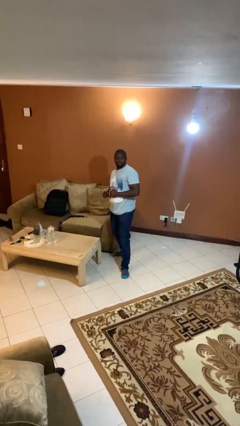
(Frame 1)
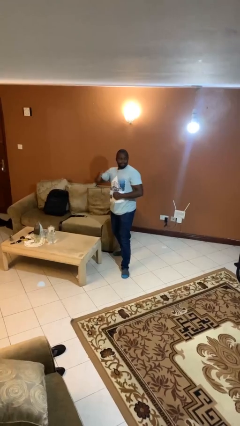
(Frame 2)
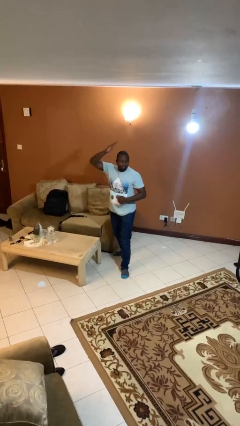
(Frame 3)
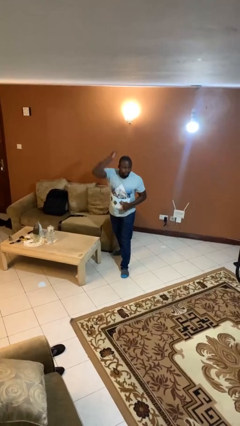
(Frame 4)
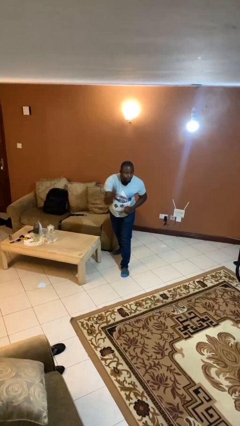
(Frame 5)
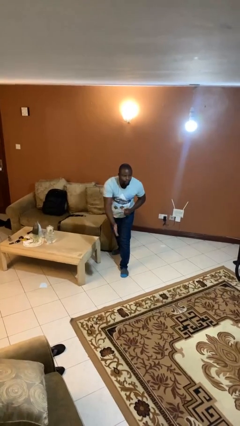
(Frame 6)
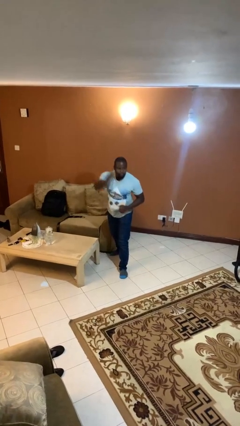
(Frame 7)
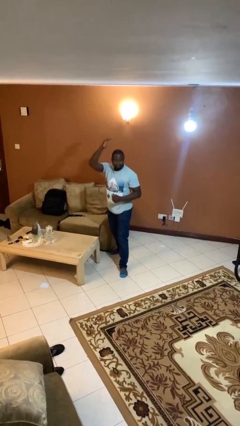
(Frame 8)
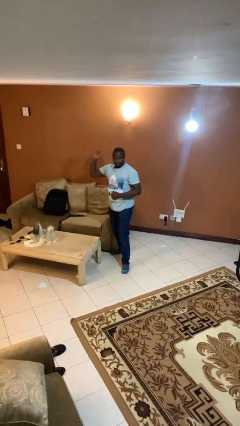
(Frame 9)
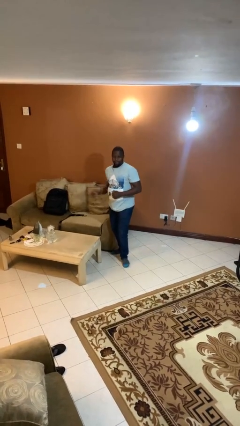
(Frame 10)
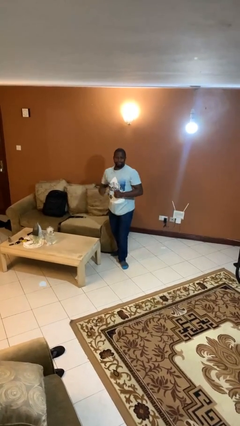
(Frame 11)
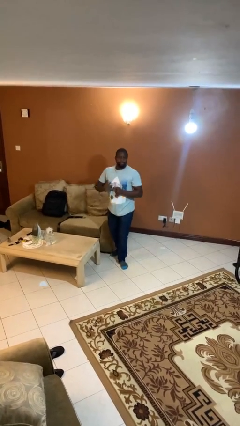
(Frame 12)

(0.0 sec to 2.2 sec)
person karate chop

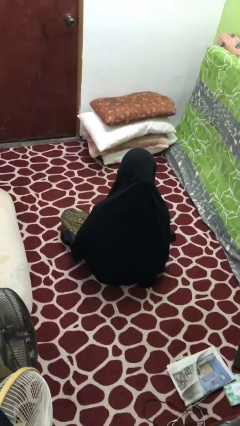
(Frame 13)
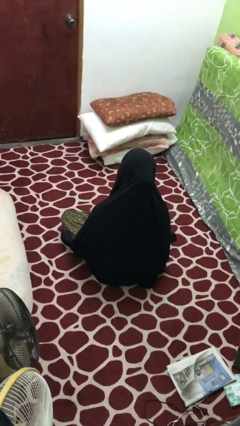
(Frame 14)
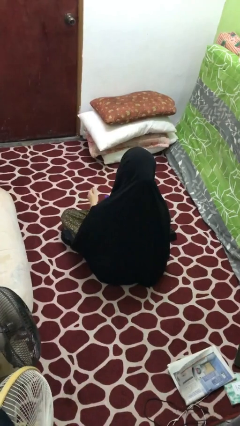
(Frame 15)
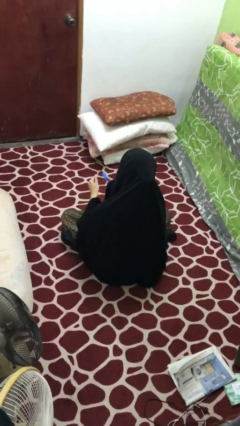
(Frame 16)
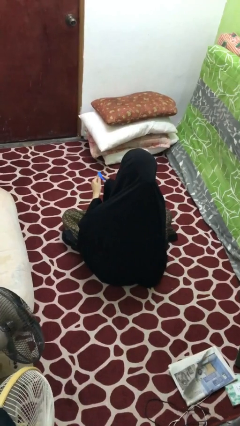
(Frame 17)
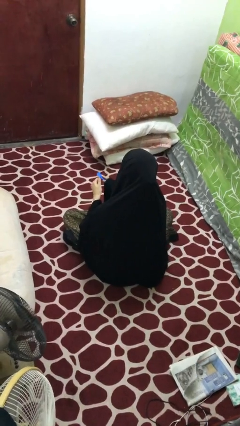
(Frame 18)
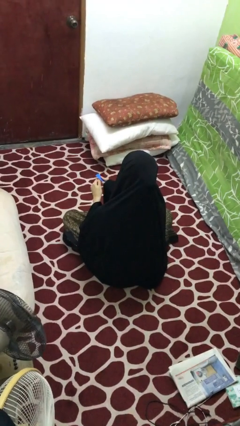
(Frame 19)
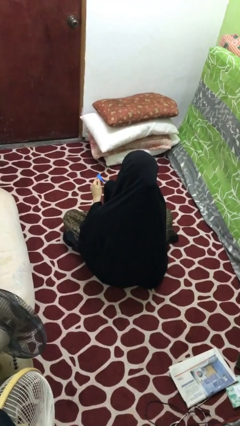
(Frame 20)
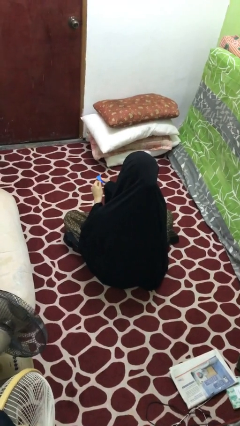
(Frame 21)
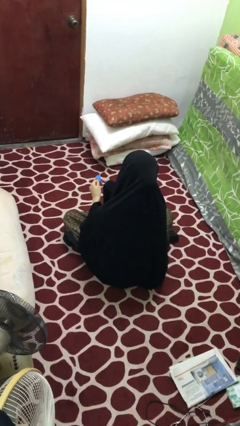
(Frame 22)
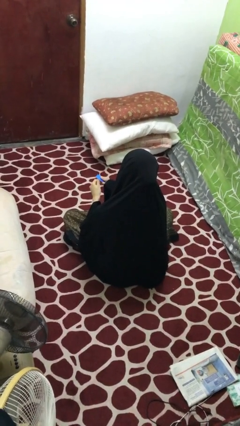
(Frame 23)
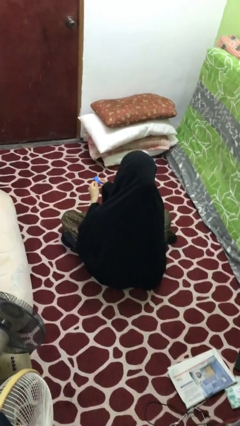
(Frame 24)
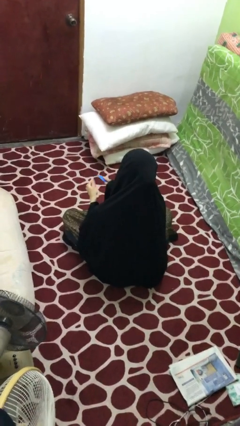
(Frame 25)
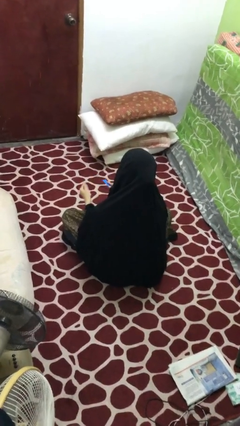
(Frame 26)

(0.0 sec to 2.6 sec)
person files fingernails

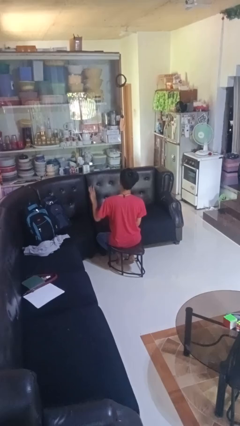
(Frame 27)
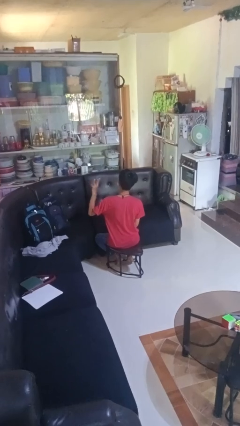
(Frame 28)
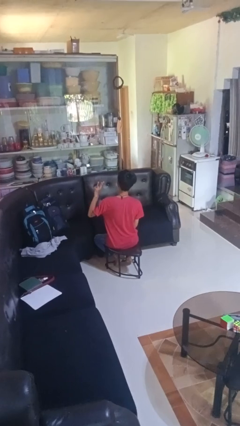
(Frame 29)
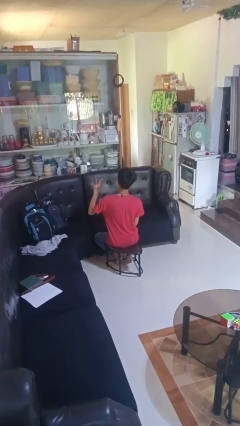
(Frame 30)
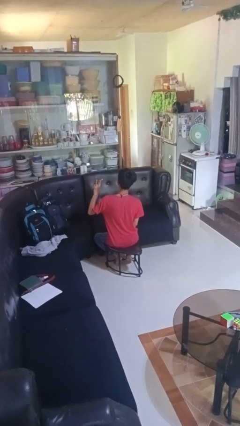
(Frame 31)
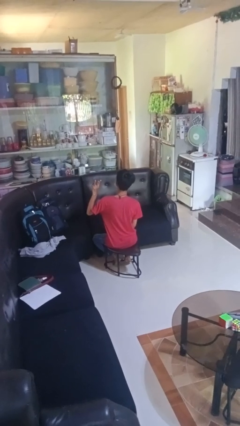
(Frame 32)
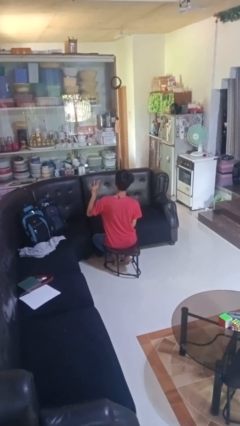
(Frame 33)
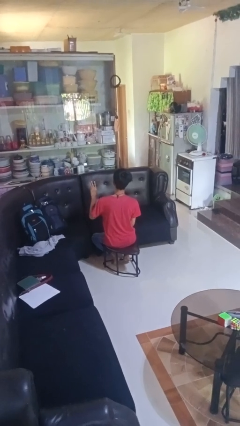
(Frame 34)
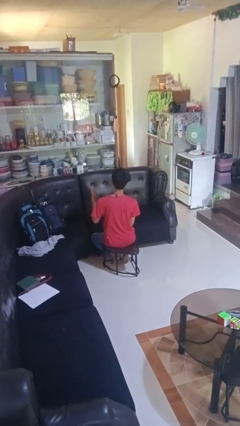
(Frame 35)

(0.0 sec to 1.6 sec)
person gestures number three

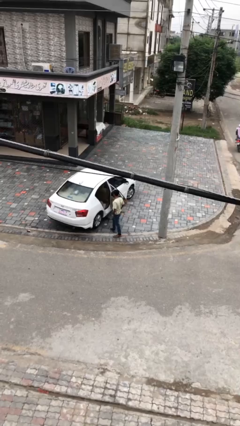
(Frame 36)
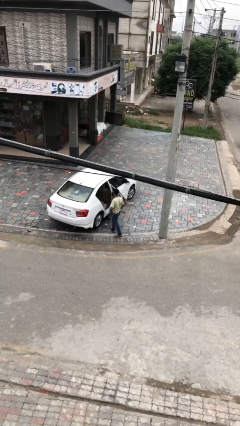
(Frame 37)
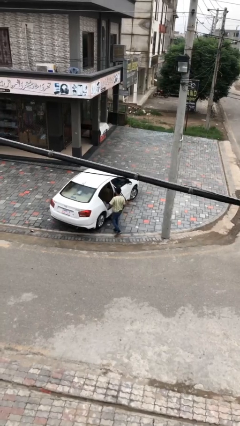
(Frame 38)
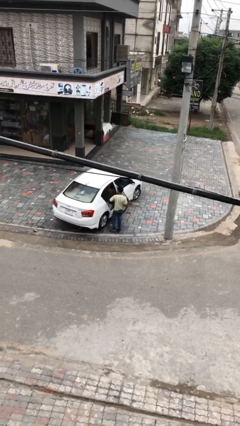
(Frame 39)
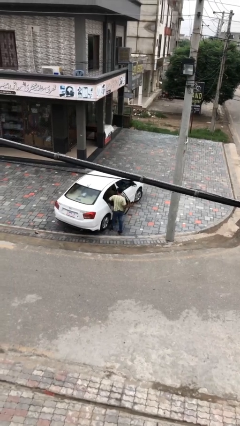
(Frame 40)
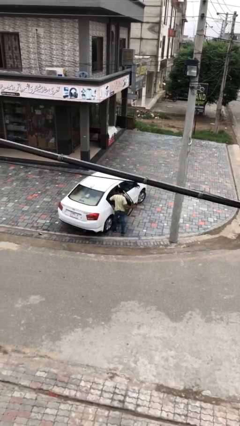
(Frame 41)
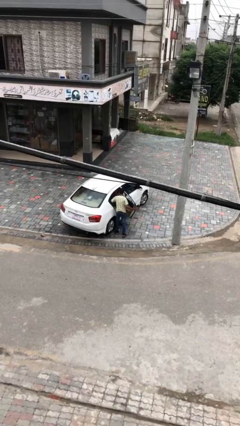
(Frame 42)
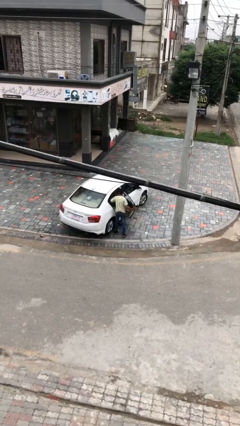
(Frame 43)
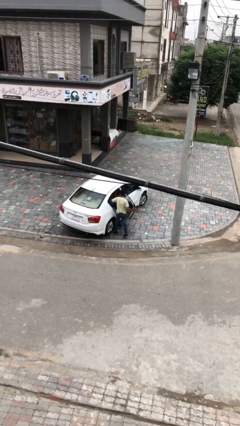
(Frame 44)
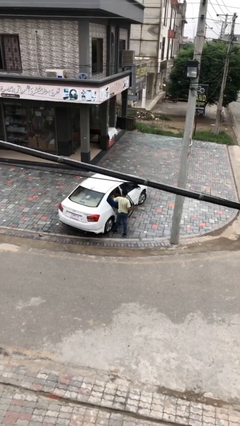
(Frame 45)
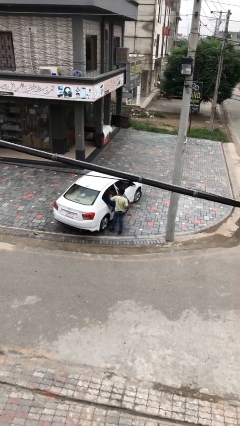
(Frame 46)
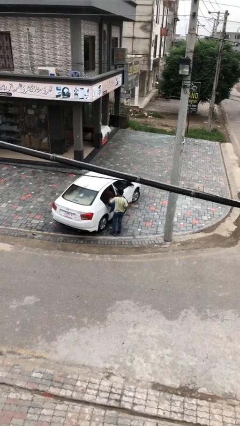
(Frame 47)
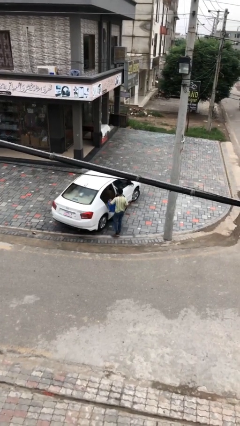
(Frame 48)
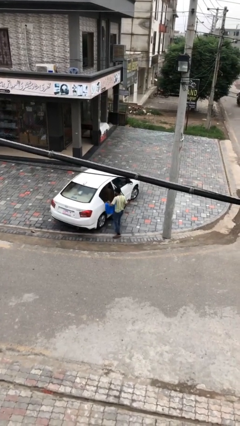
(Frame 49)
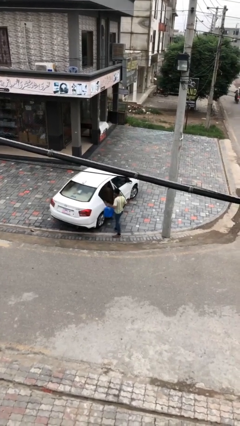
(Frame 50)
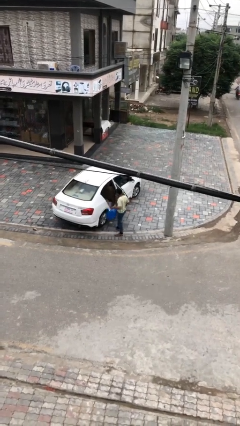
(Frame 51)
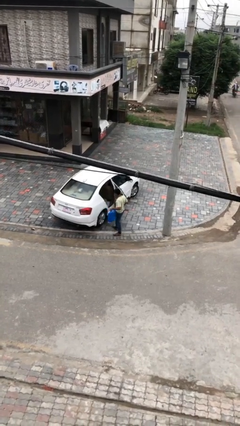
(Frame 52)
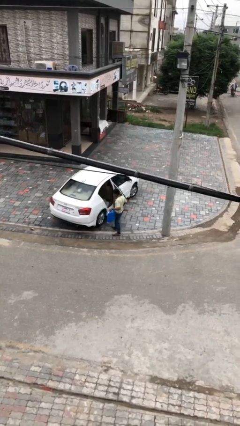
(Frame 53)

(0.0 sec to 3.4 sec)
person unloads car

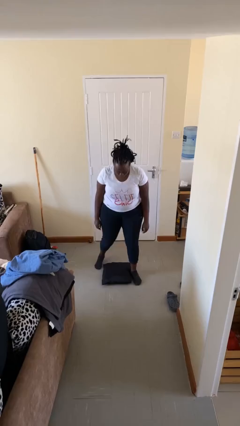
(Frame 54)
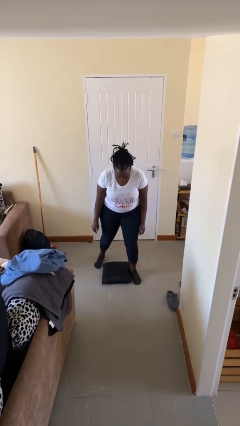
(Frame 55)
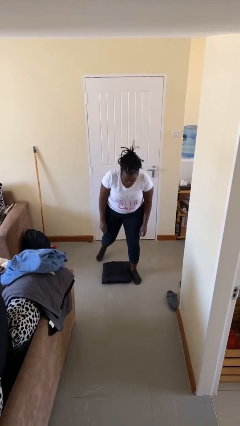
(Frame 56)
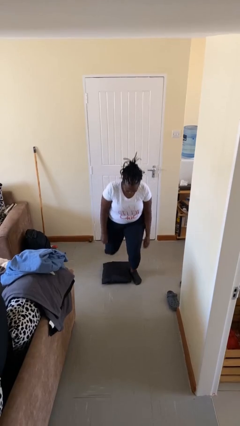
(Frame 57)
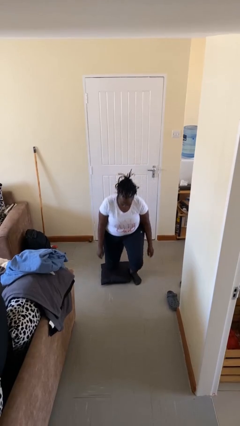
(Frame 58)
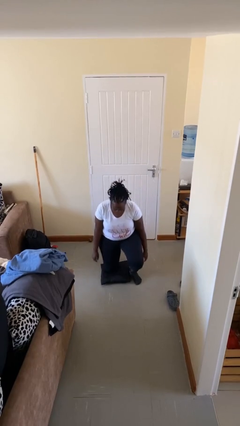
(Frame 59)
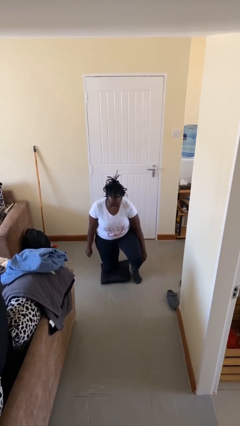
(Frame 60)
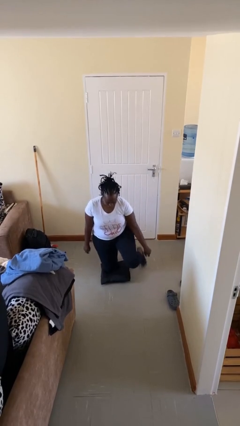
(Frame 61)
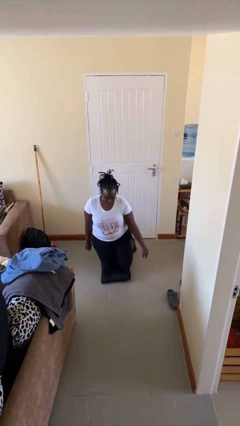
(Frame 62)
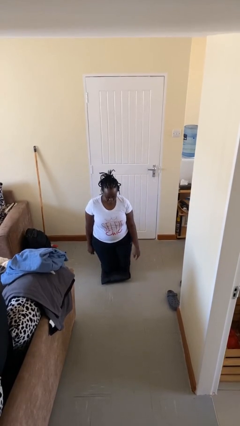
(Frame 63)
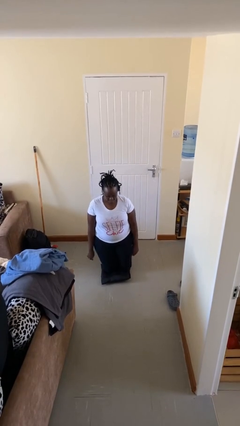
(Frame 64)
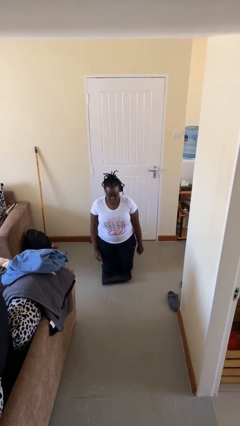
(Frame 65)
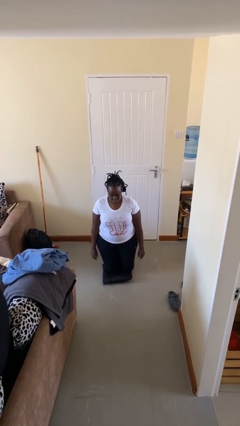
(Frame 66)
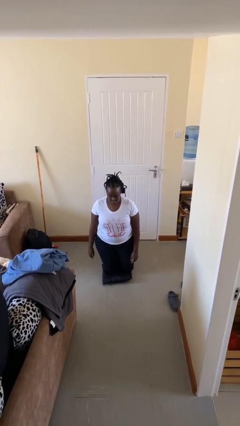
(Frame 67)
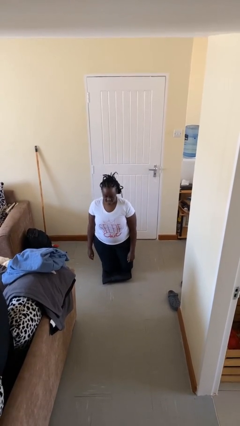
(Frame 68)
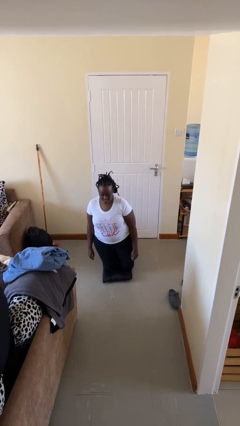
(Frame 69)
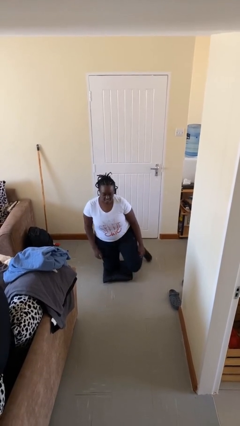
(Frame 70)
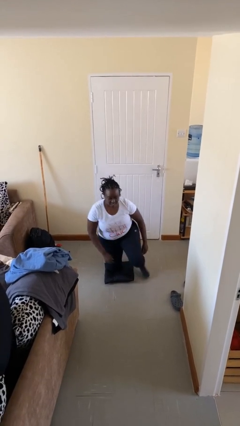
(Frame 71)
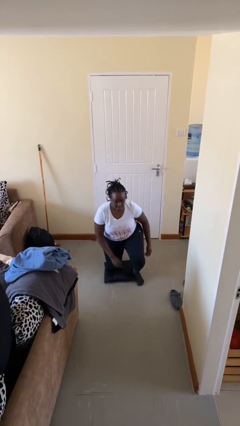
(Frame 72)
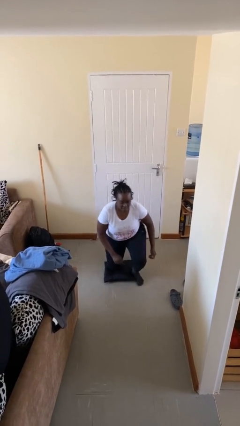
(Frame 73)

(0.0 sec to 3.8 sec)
person kneels

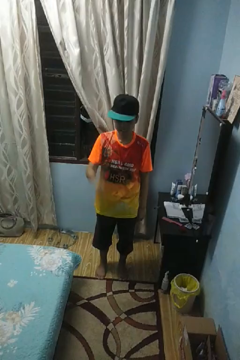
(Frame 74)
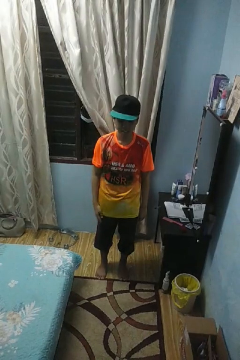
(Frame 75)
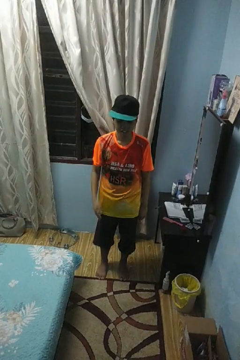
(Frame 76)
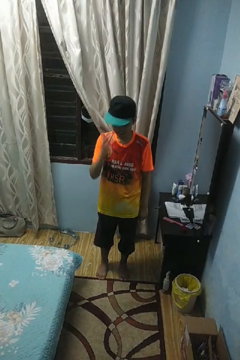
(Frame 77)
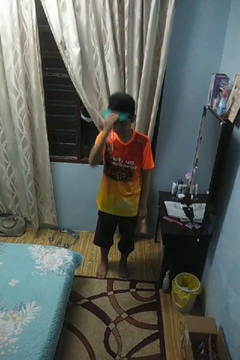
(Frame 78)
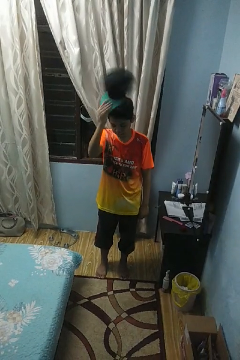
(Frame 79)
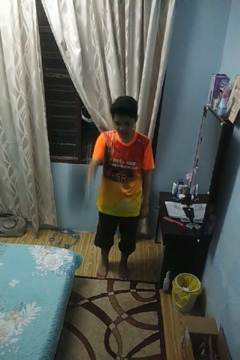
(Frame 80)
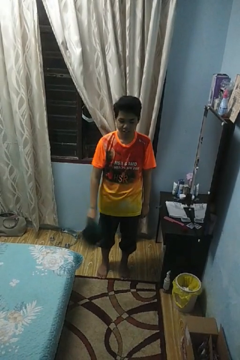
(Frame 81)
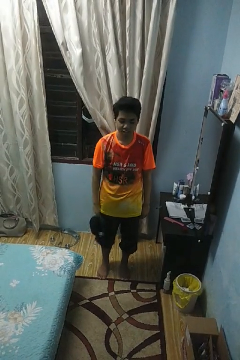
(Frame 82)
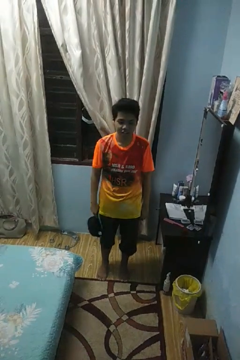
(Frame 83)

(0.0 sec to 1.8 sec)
person takes off hat

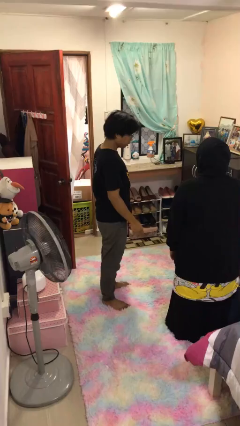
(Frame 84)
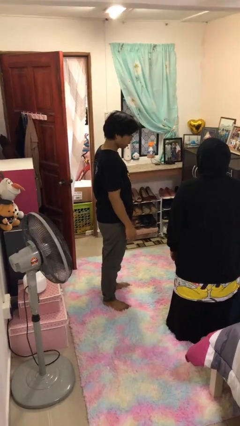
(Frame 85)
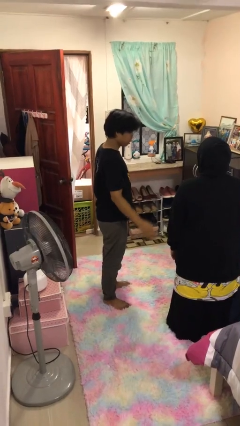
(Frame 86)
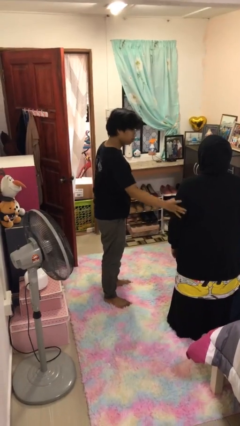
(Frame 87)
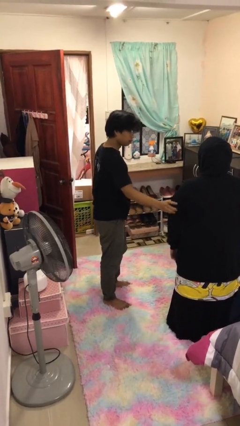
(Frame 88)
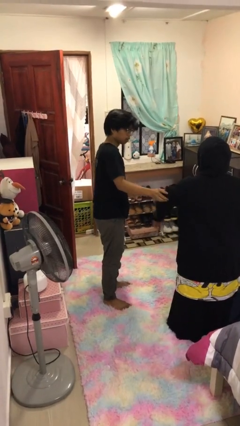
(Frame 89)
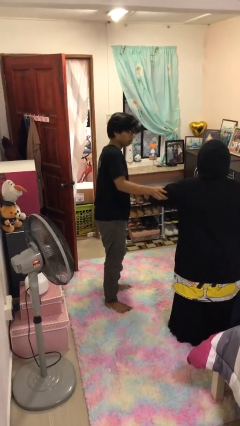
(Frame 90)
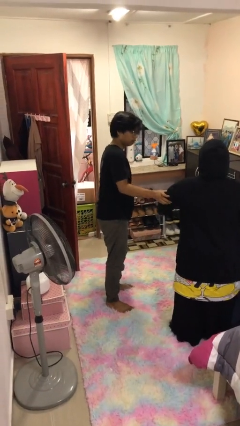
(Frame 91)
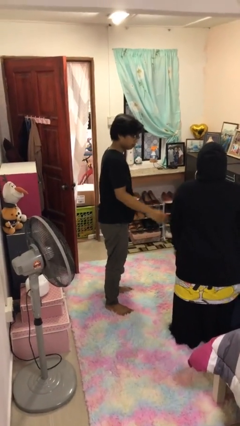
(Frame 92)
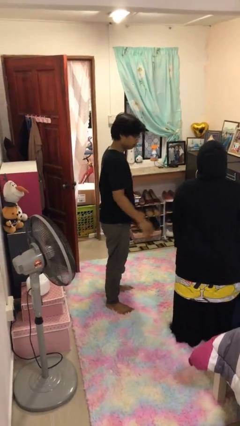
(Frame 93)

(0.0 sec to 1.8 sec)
person grabs person by bicep
